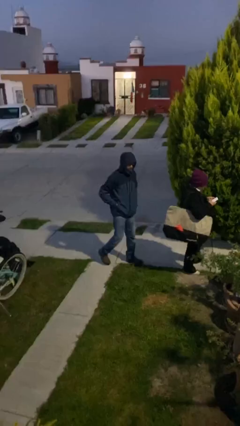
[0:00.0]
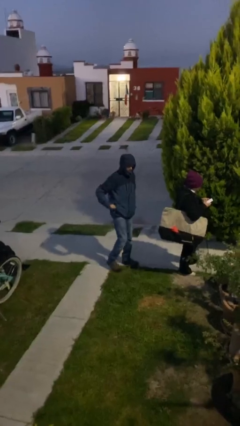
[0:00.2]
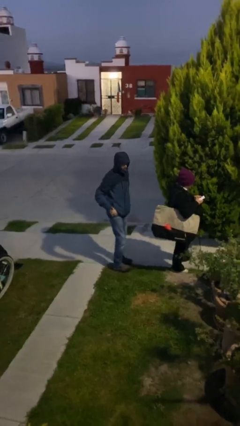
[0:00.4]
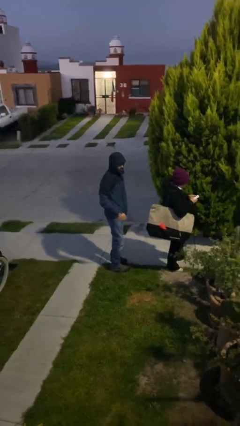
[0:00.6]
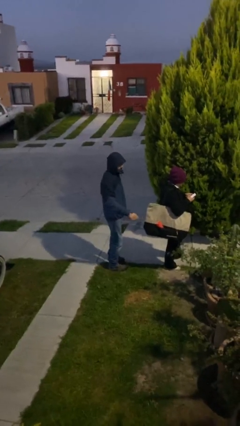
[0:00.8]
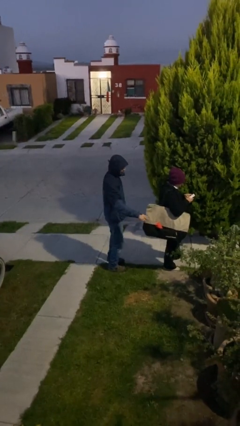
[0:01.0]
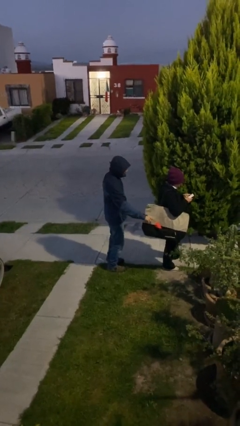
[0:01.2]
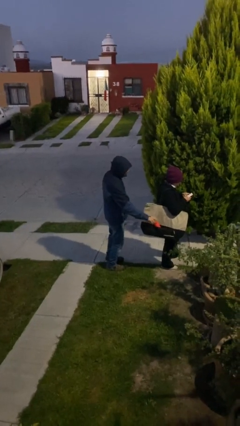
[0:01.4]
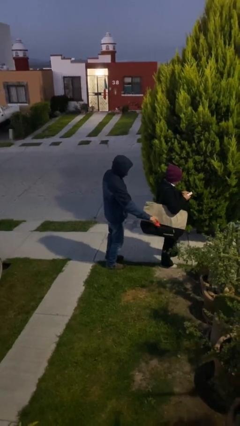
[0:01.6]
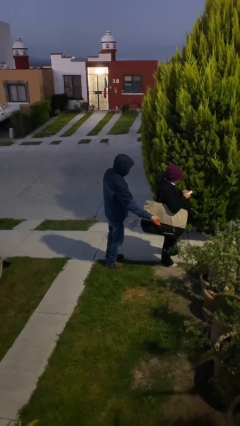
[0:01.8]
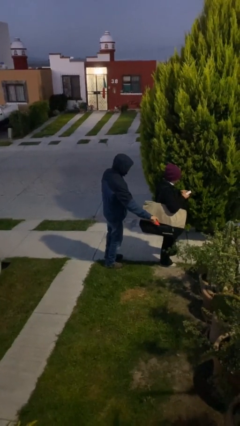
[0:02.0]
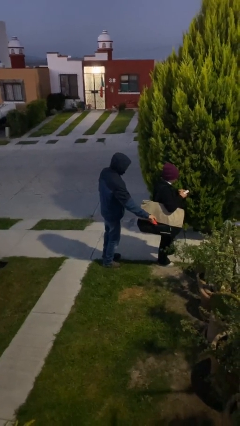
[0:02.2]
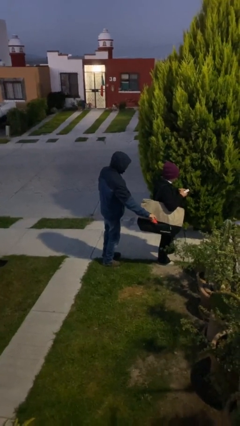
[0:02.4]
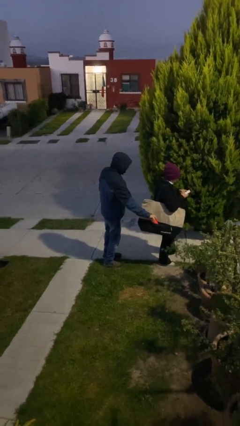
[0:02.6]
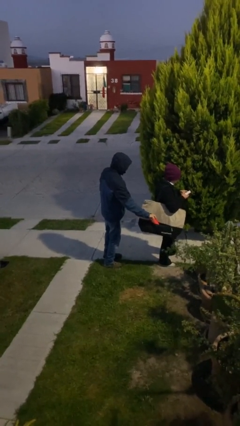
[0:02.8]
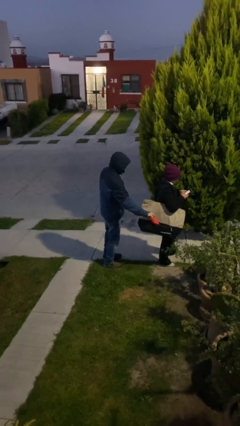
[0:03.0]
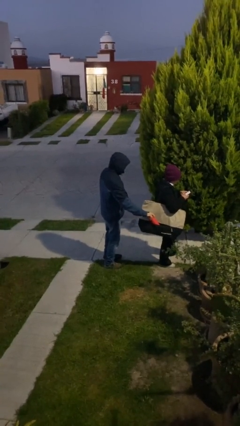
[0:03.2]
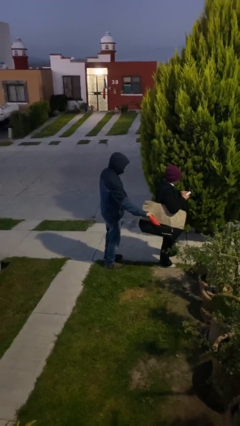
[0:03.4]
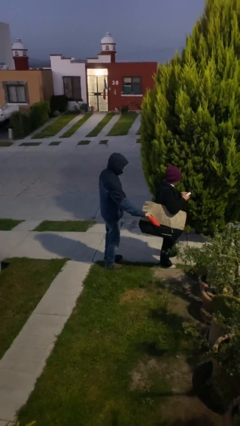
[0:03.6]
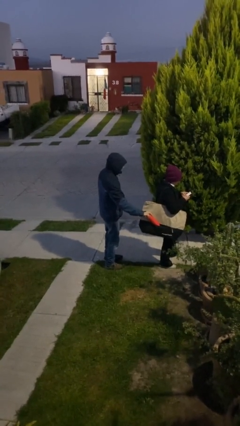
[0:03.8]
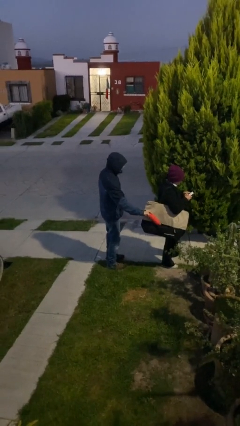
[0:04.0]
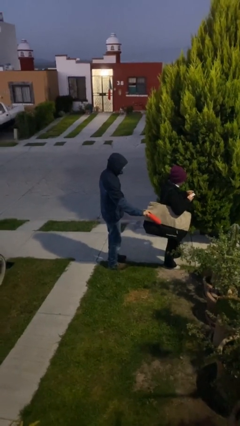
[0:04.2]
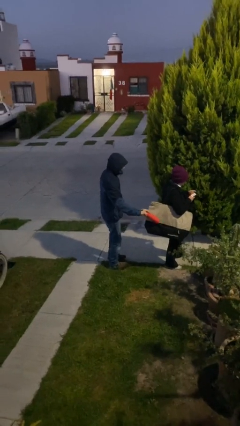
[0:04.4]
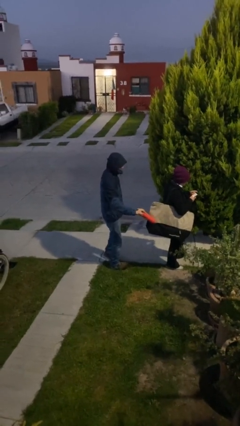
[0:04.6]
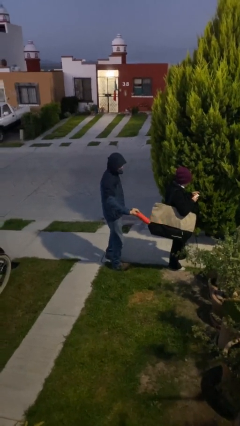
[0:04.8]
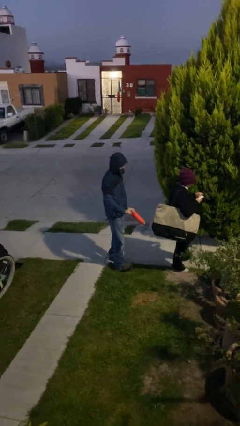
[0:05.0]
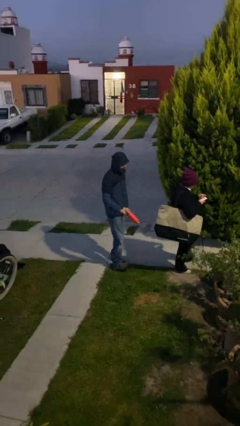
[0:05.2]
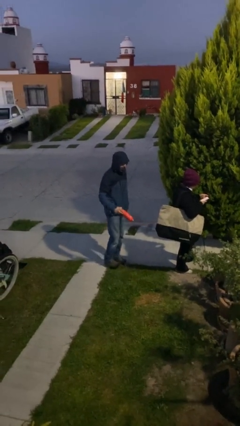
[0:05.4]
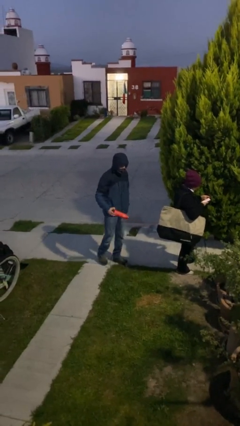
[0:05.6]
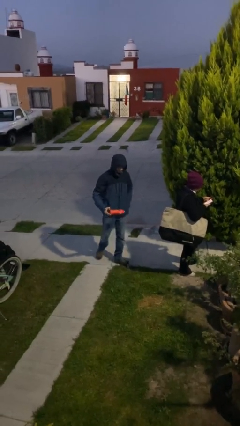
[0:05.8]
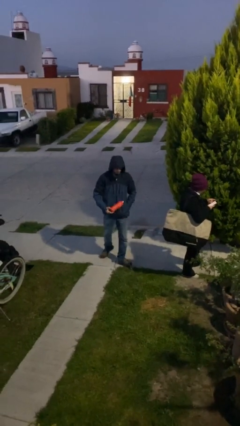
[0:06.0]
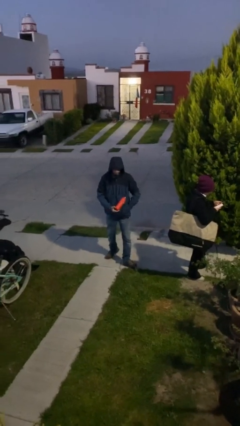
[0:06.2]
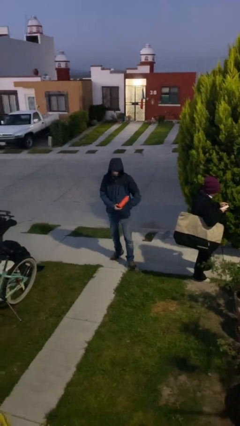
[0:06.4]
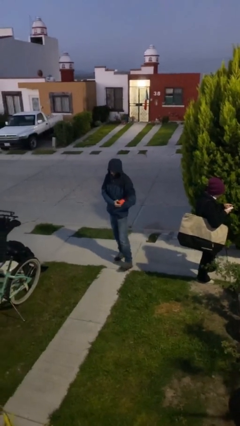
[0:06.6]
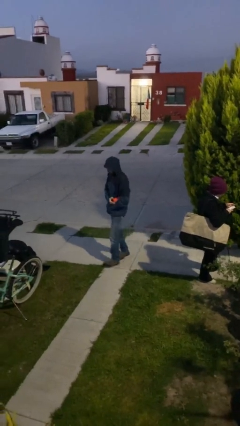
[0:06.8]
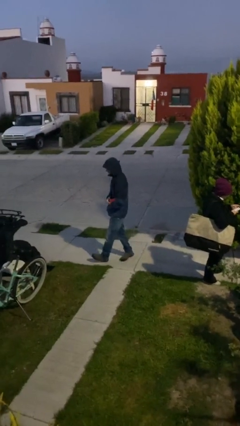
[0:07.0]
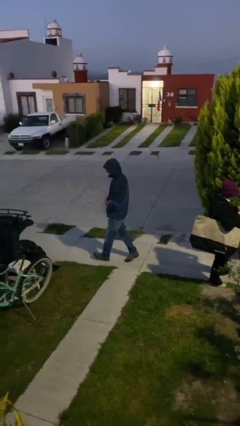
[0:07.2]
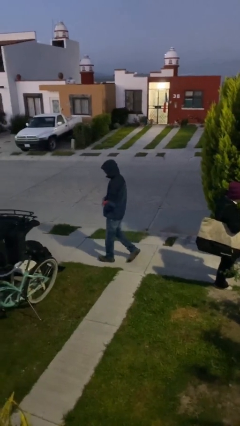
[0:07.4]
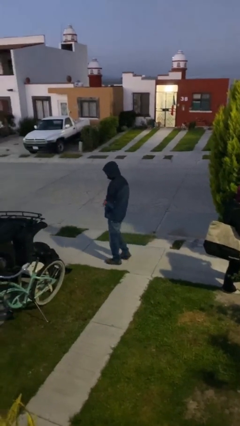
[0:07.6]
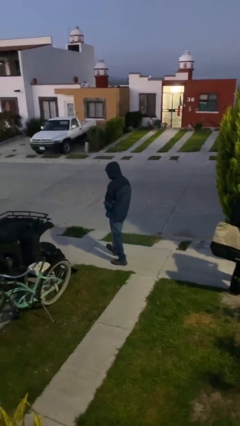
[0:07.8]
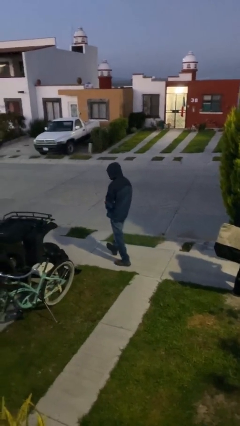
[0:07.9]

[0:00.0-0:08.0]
person steals object from person

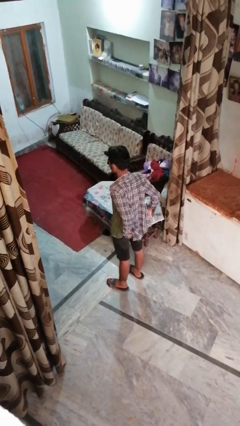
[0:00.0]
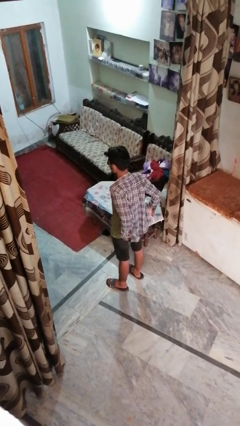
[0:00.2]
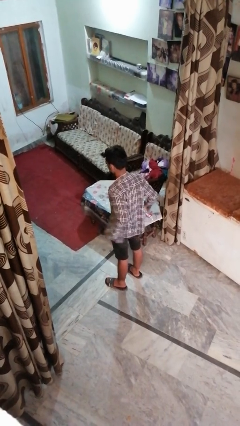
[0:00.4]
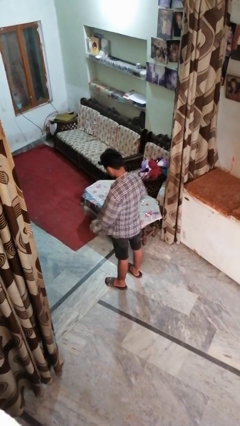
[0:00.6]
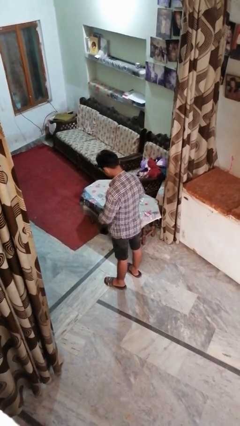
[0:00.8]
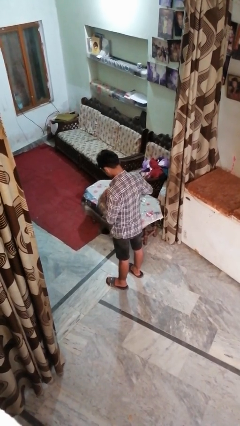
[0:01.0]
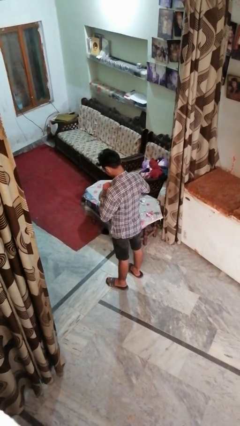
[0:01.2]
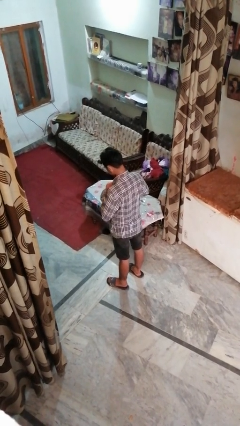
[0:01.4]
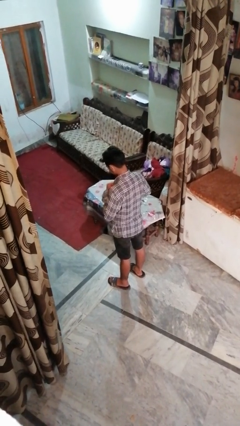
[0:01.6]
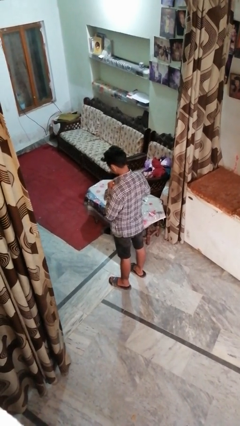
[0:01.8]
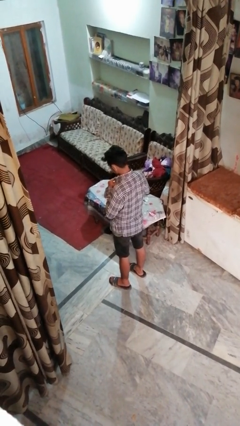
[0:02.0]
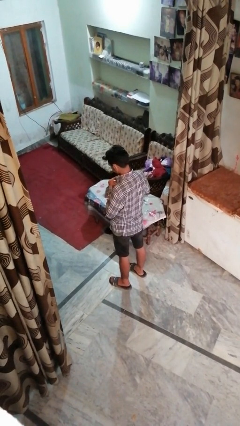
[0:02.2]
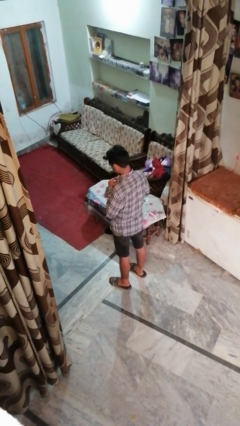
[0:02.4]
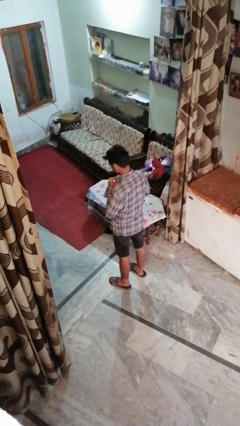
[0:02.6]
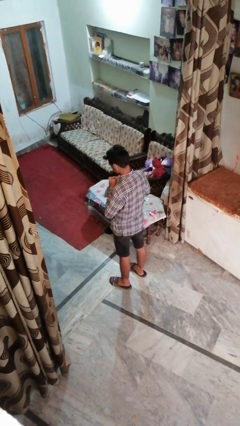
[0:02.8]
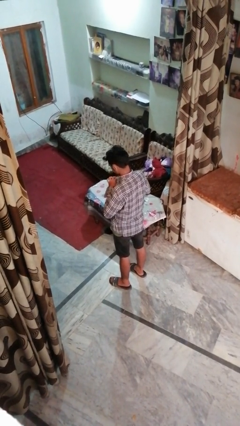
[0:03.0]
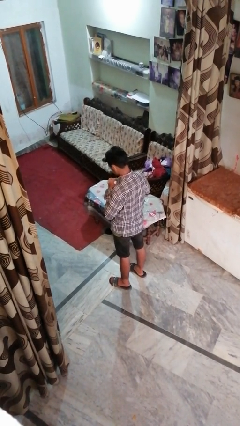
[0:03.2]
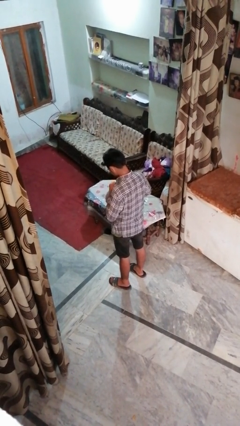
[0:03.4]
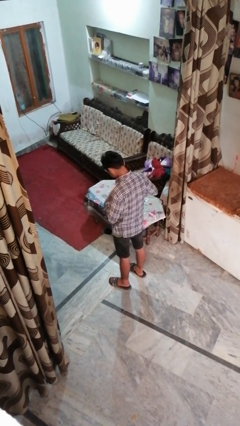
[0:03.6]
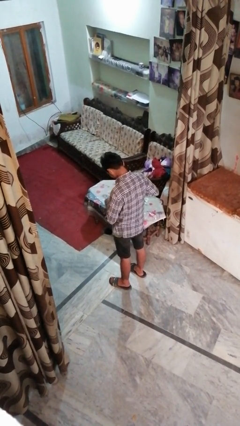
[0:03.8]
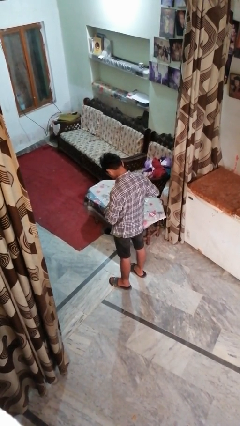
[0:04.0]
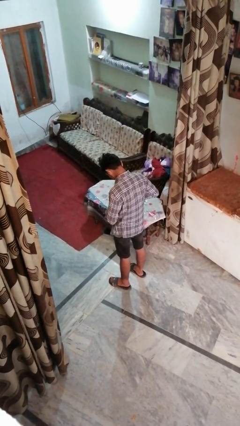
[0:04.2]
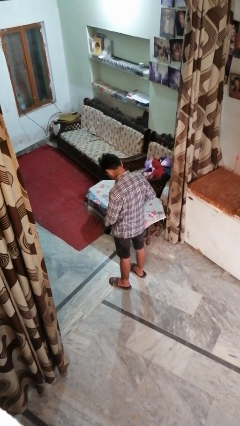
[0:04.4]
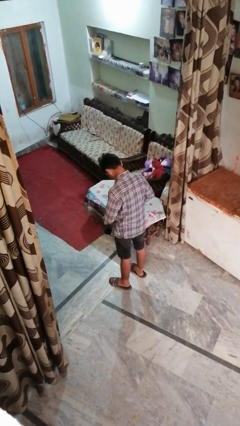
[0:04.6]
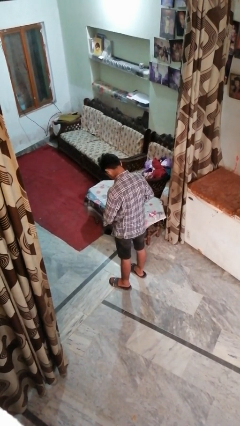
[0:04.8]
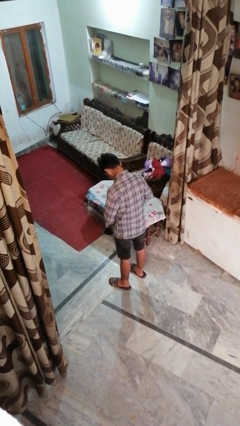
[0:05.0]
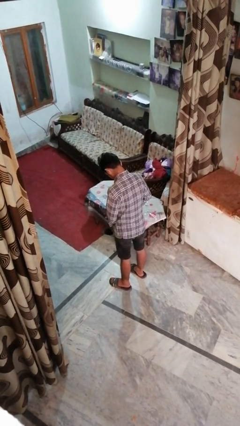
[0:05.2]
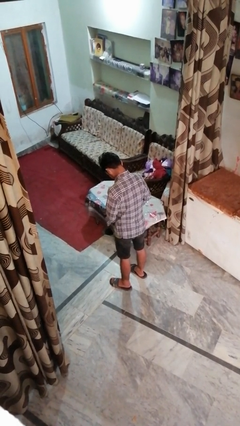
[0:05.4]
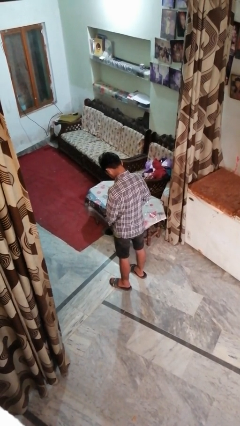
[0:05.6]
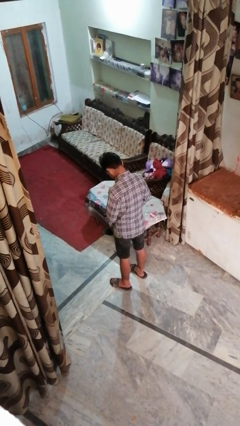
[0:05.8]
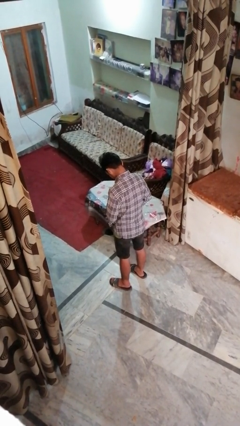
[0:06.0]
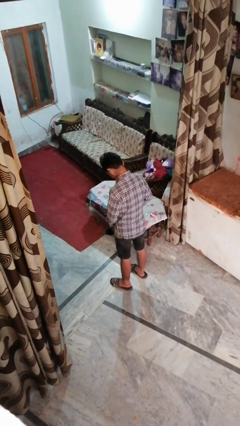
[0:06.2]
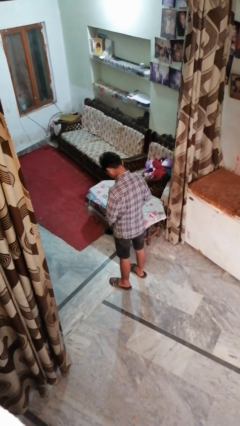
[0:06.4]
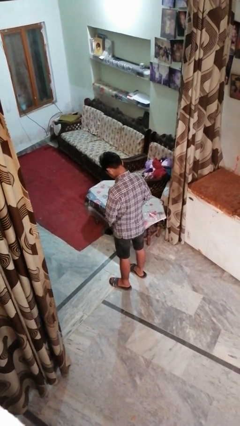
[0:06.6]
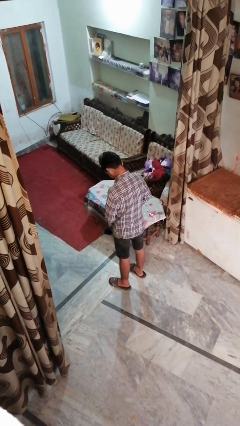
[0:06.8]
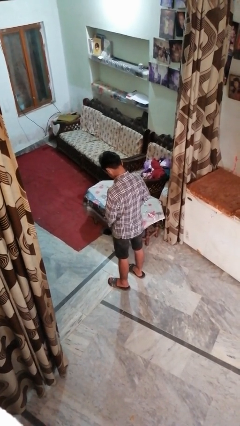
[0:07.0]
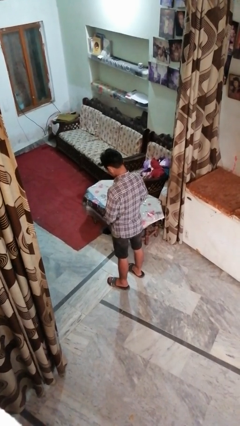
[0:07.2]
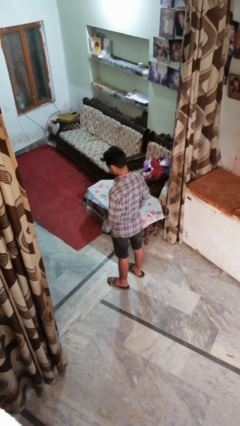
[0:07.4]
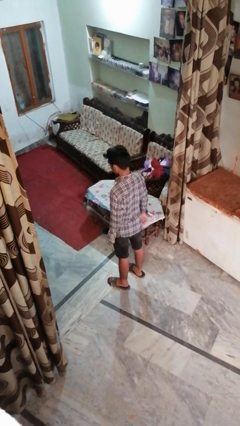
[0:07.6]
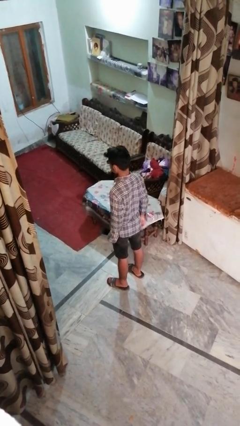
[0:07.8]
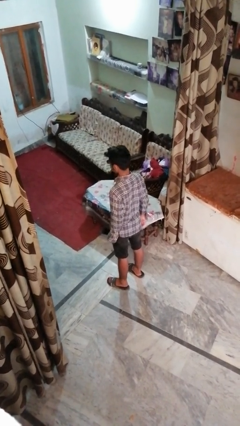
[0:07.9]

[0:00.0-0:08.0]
person buttons shirt

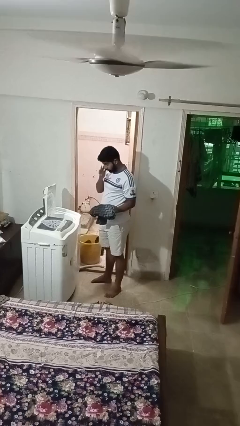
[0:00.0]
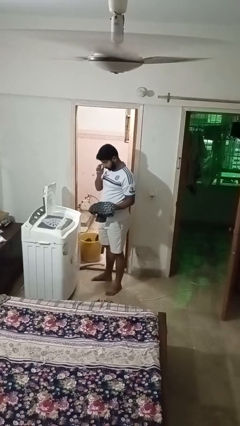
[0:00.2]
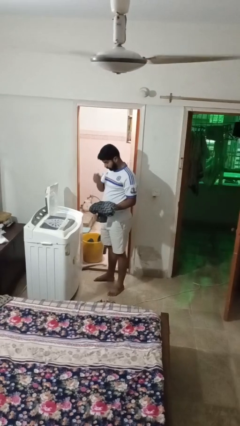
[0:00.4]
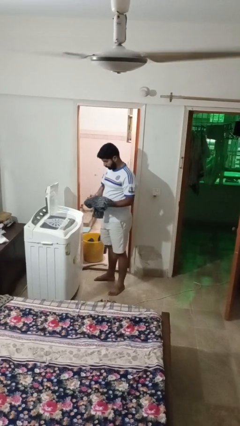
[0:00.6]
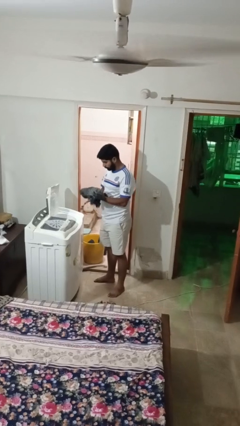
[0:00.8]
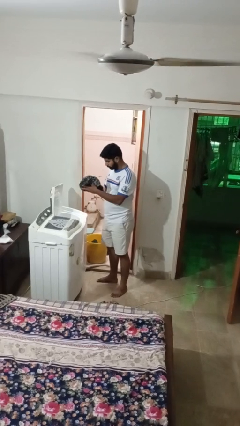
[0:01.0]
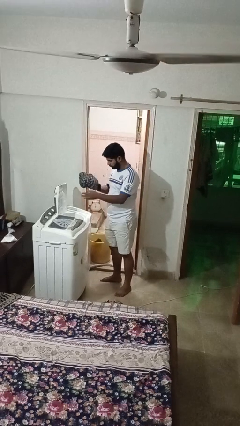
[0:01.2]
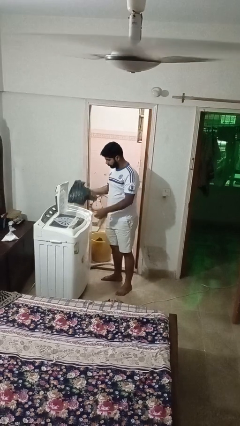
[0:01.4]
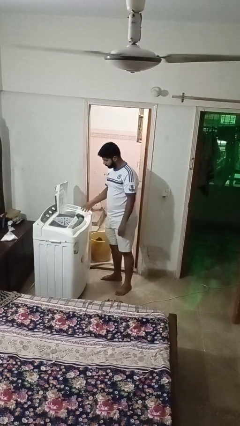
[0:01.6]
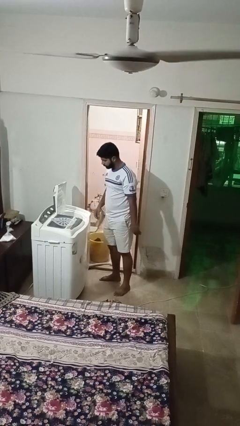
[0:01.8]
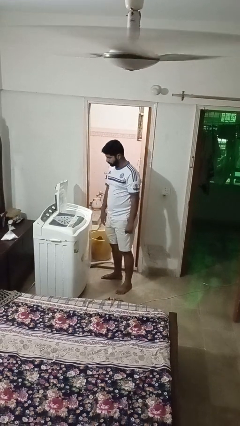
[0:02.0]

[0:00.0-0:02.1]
person loads dryer
